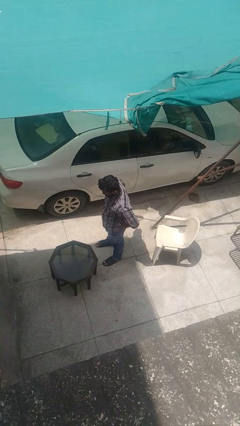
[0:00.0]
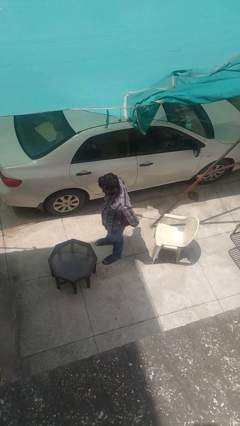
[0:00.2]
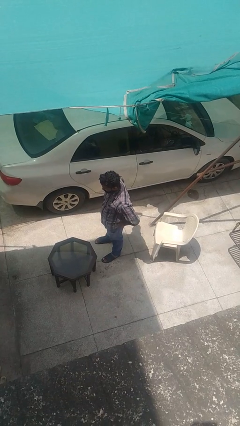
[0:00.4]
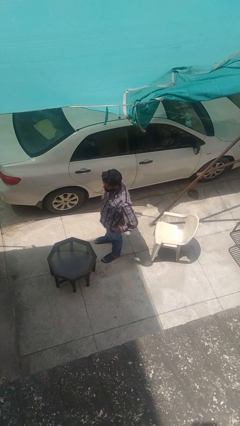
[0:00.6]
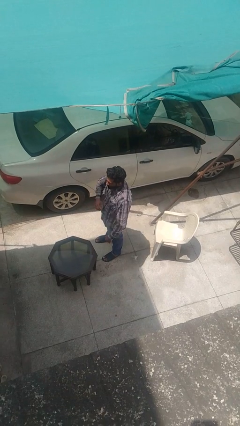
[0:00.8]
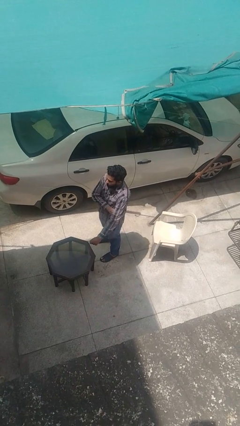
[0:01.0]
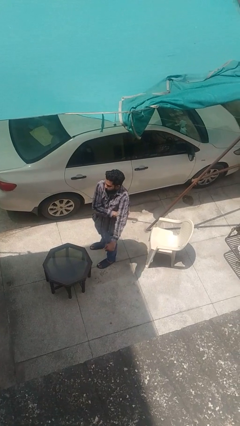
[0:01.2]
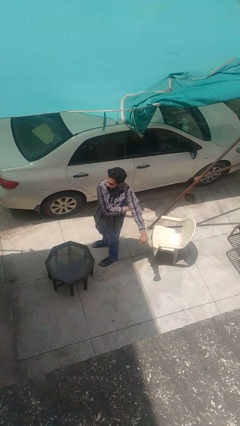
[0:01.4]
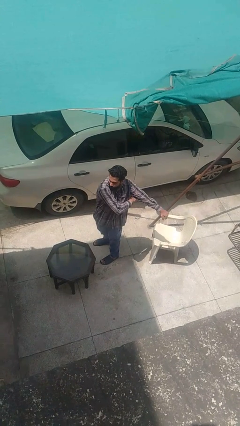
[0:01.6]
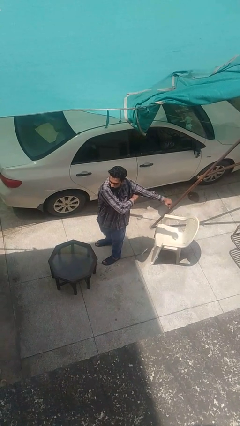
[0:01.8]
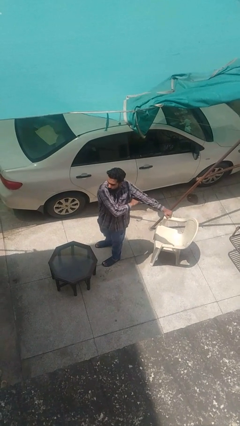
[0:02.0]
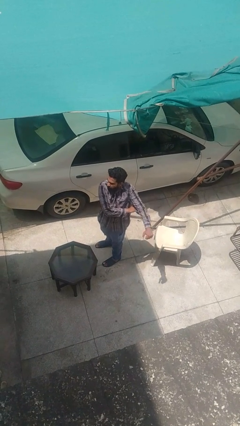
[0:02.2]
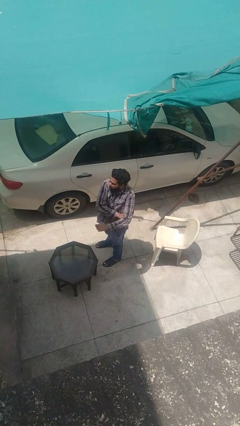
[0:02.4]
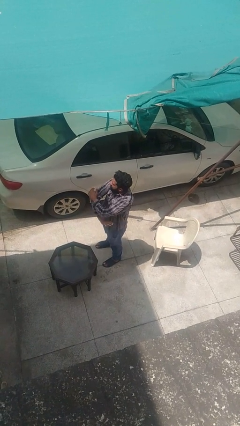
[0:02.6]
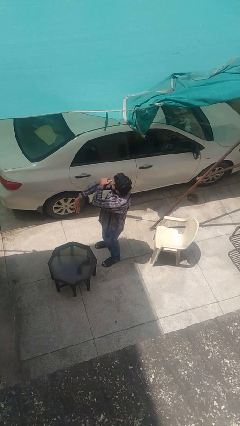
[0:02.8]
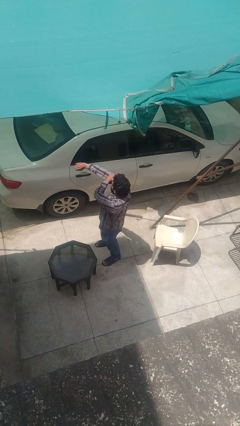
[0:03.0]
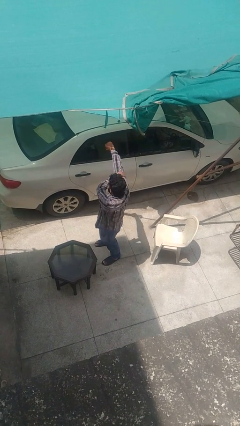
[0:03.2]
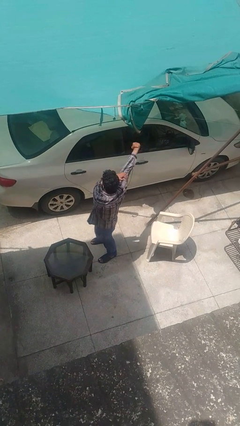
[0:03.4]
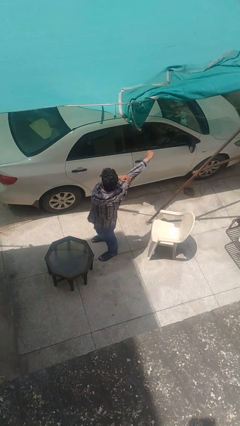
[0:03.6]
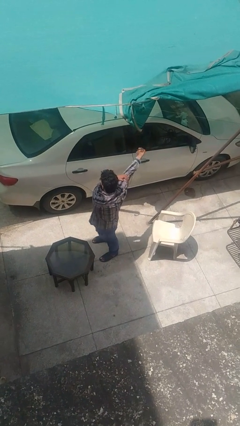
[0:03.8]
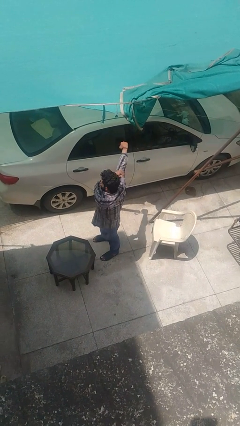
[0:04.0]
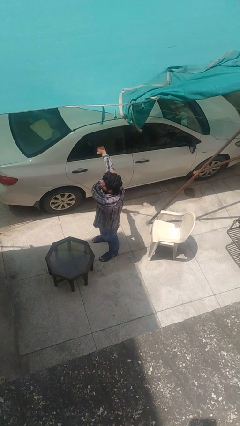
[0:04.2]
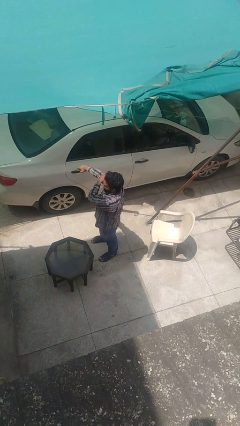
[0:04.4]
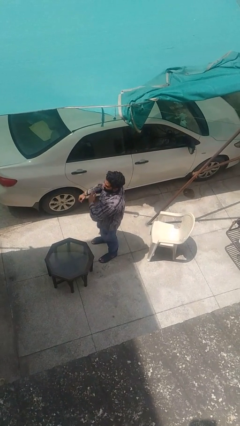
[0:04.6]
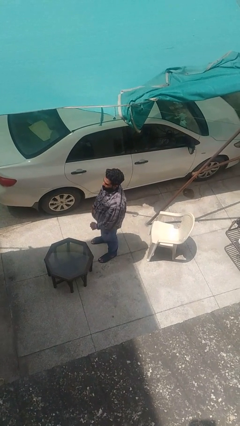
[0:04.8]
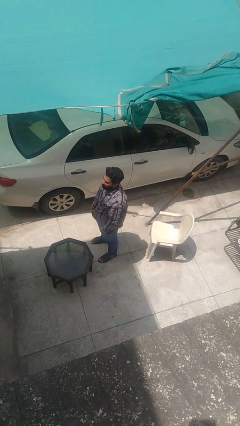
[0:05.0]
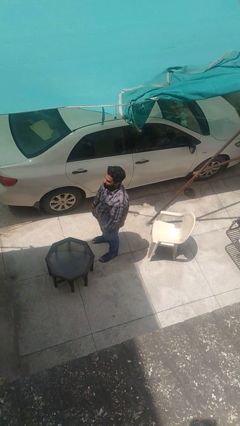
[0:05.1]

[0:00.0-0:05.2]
person stretches arms to side

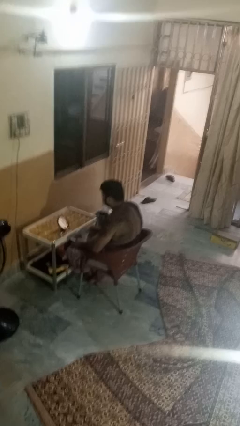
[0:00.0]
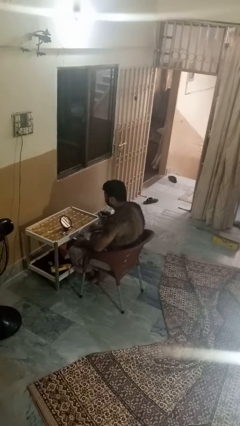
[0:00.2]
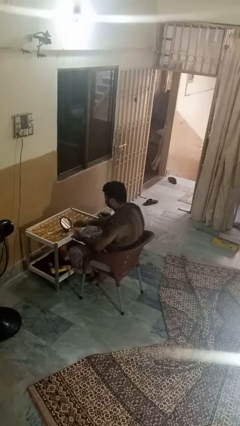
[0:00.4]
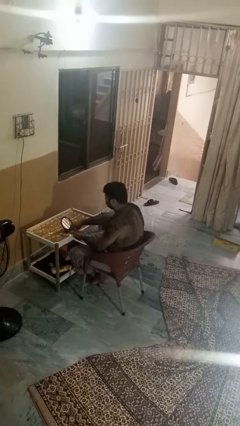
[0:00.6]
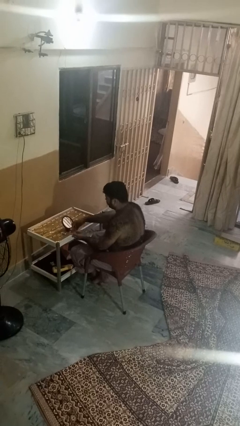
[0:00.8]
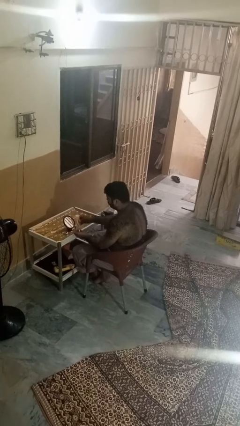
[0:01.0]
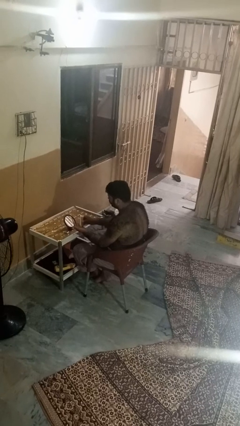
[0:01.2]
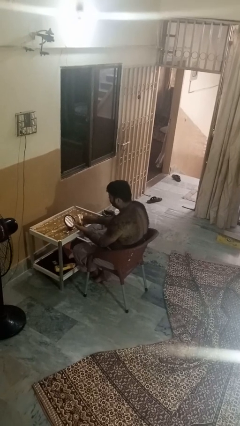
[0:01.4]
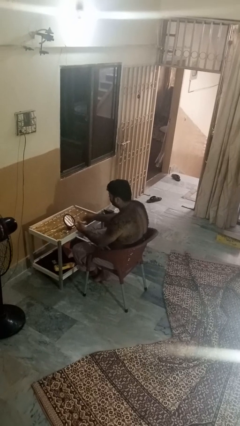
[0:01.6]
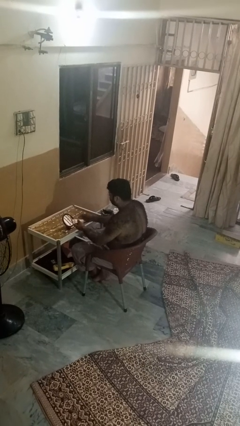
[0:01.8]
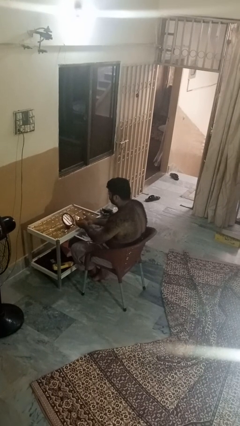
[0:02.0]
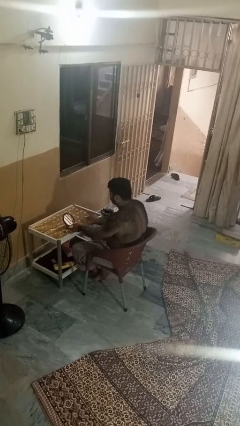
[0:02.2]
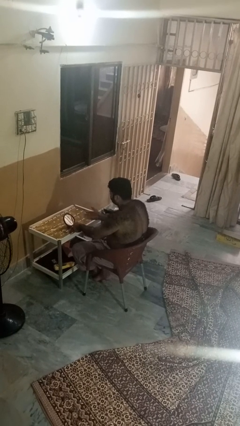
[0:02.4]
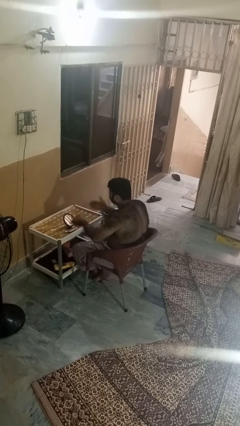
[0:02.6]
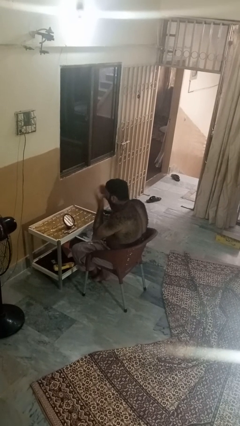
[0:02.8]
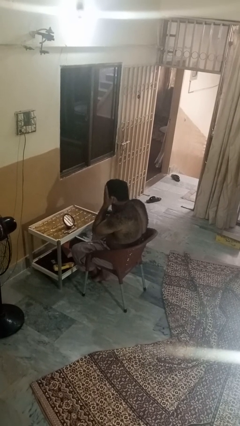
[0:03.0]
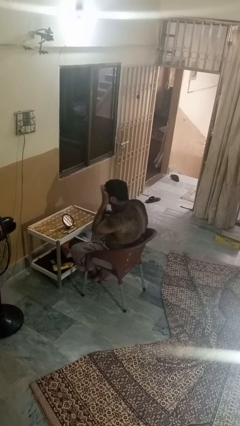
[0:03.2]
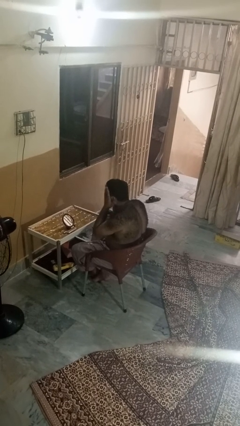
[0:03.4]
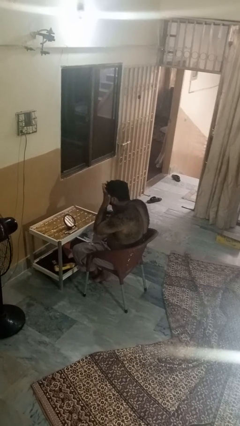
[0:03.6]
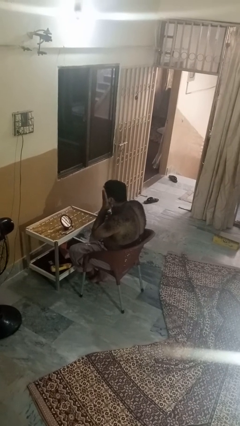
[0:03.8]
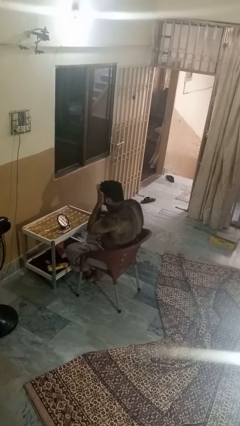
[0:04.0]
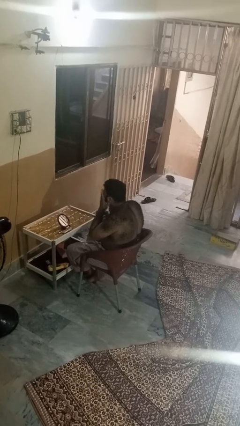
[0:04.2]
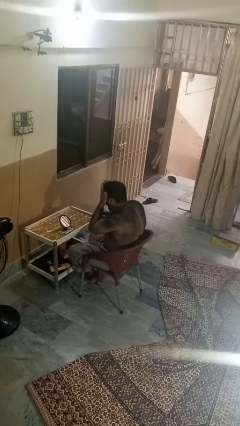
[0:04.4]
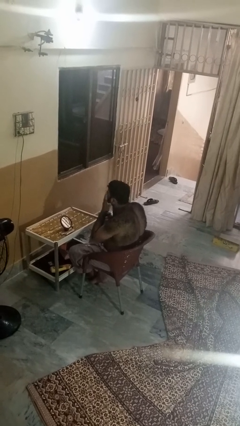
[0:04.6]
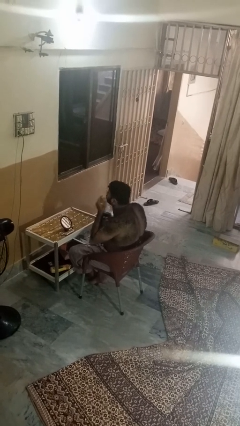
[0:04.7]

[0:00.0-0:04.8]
person applies foundation makeup

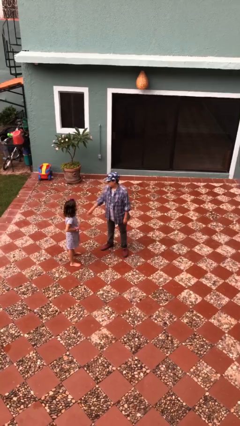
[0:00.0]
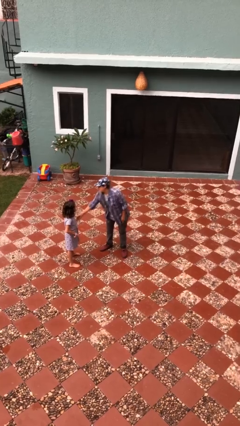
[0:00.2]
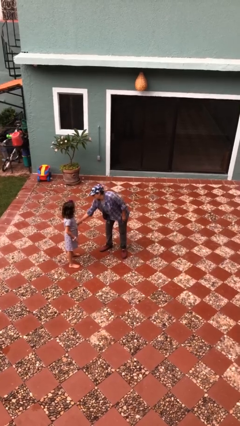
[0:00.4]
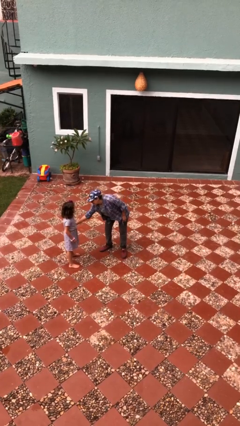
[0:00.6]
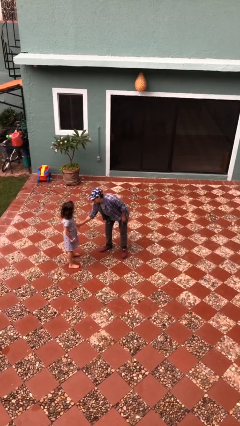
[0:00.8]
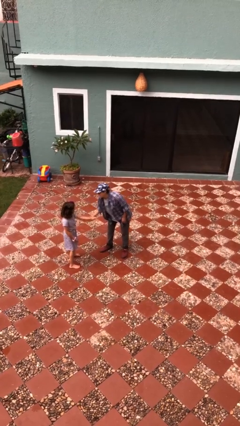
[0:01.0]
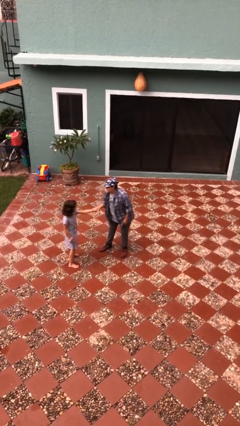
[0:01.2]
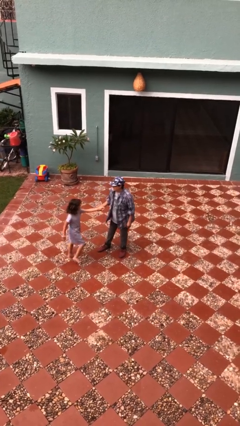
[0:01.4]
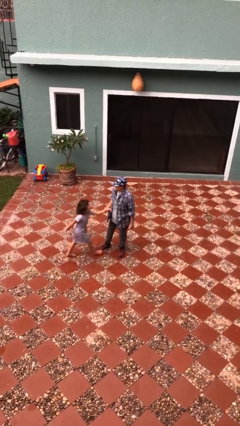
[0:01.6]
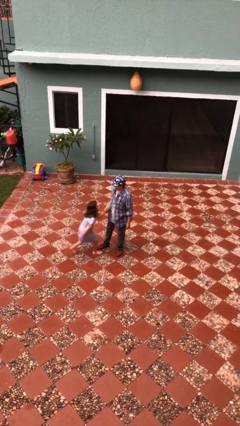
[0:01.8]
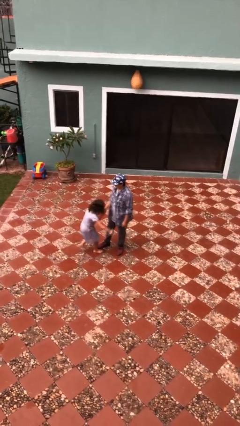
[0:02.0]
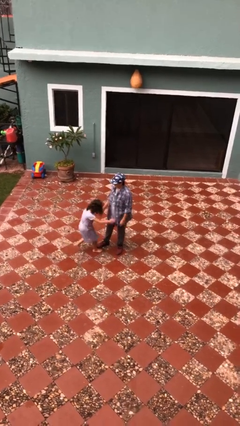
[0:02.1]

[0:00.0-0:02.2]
person grabs person by forearm

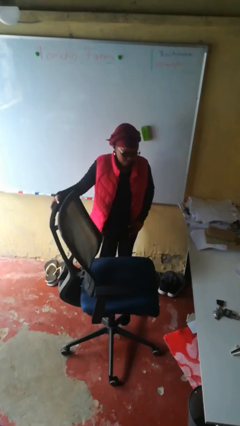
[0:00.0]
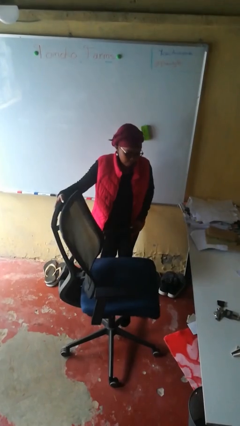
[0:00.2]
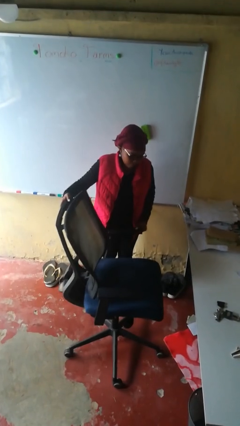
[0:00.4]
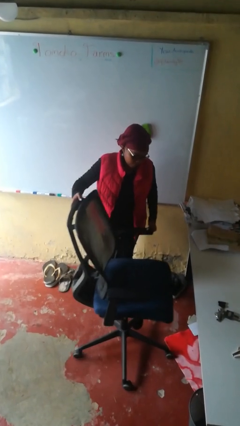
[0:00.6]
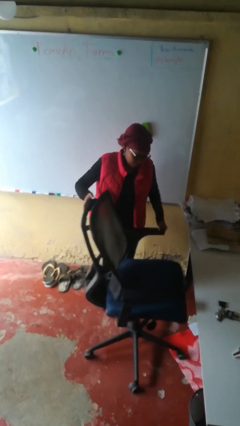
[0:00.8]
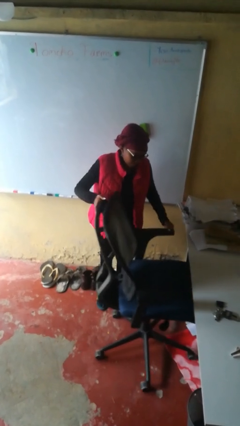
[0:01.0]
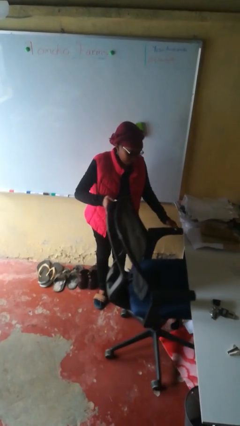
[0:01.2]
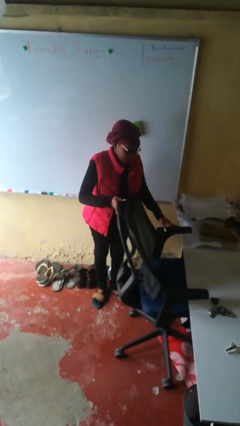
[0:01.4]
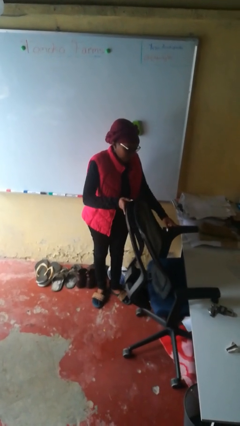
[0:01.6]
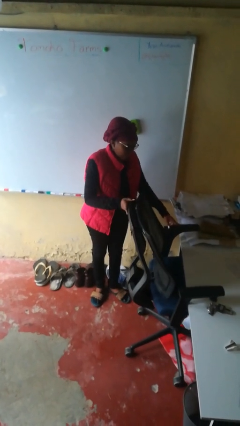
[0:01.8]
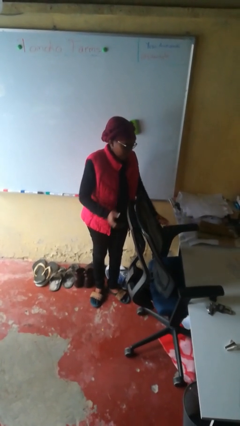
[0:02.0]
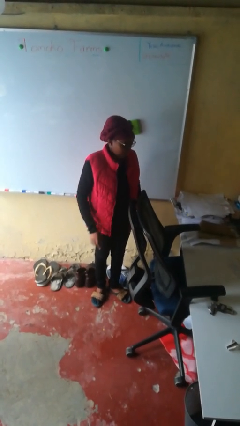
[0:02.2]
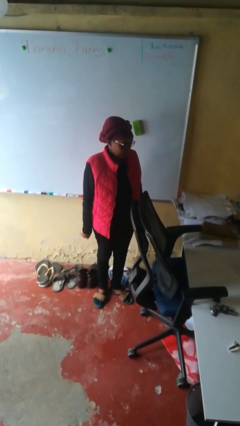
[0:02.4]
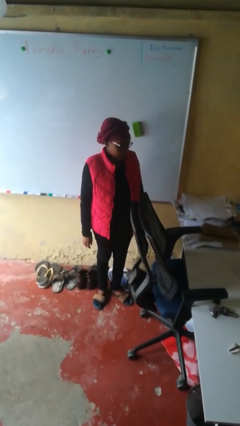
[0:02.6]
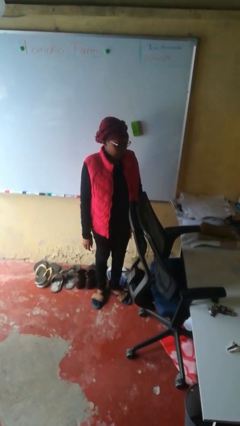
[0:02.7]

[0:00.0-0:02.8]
person pushes in chair

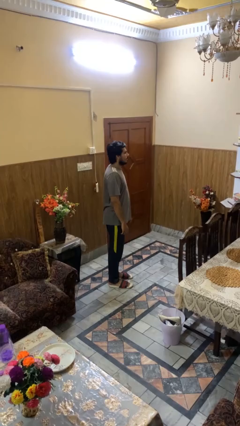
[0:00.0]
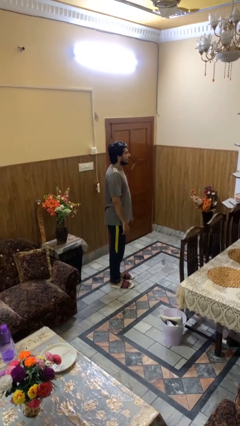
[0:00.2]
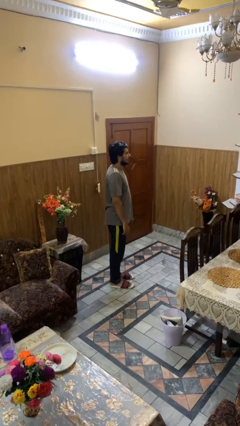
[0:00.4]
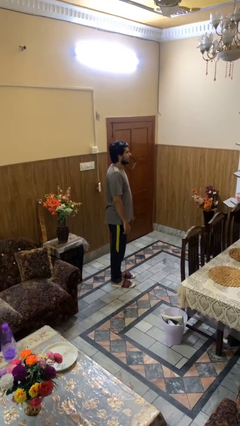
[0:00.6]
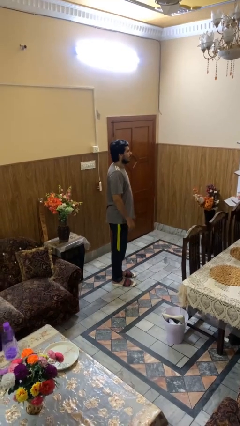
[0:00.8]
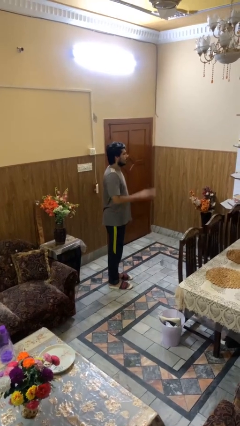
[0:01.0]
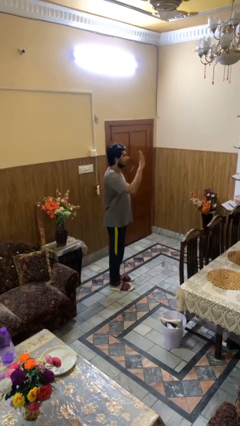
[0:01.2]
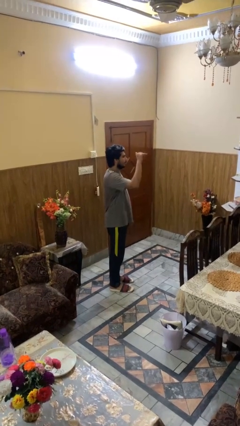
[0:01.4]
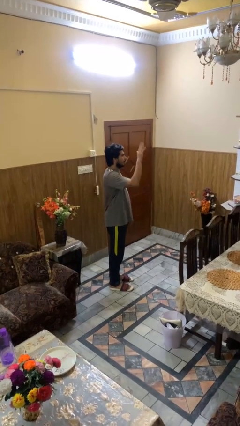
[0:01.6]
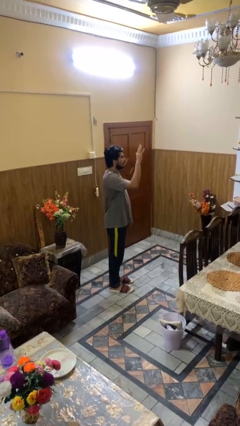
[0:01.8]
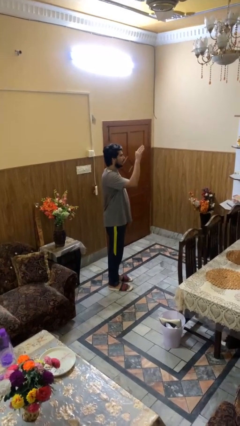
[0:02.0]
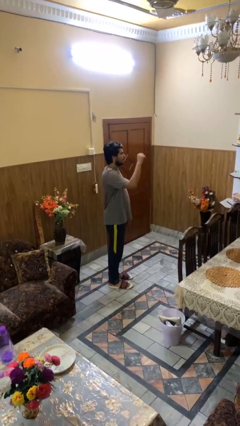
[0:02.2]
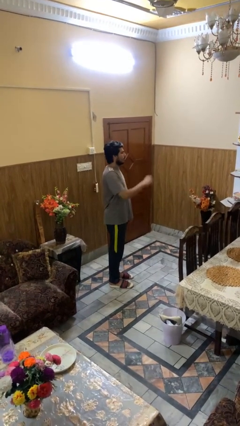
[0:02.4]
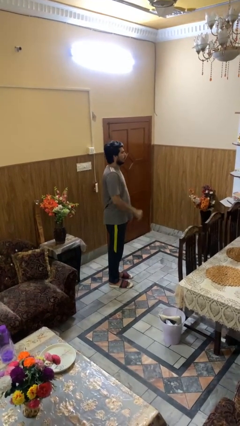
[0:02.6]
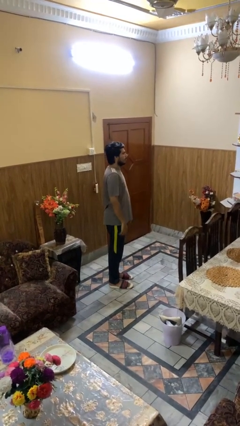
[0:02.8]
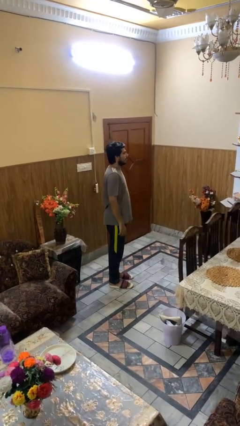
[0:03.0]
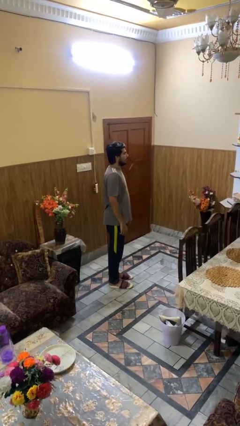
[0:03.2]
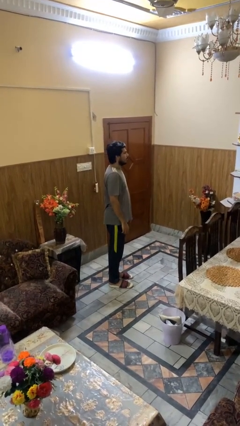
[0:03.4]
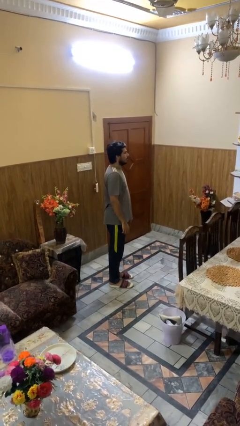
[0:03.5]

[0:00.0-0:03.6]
person gestures come here
